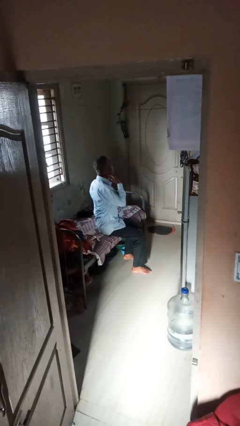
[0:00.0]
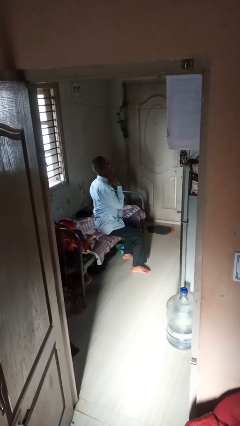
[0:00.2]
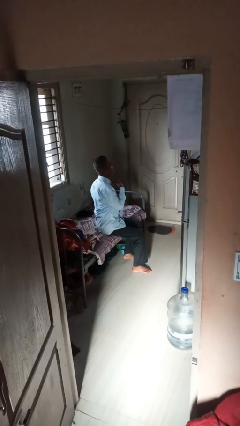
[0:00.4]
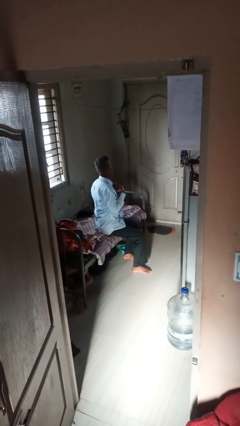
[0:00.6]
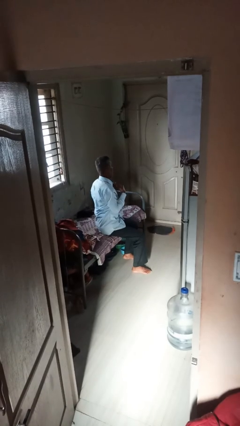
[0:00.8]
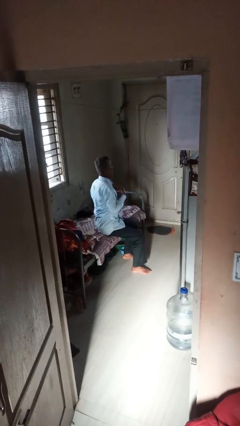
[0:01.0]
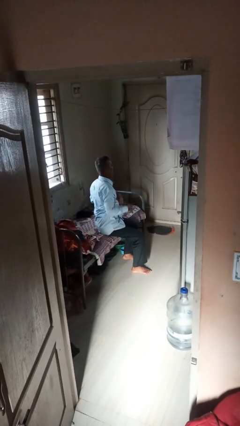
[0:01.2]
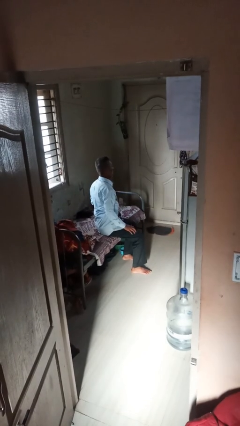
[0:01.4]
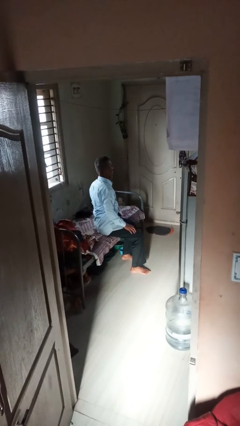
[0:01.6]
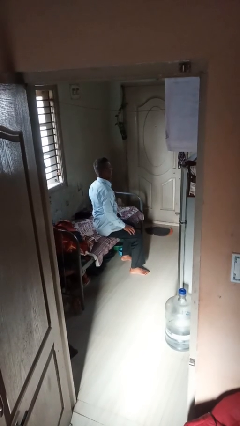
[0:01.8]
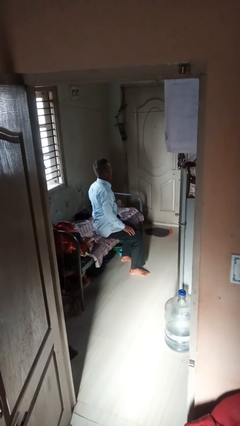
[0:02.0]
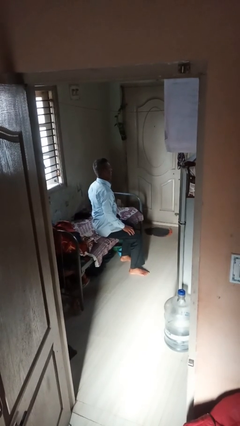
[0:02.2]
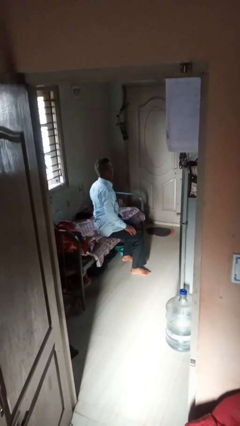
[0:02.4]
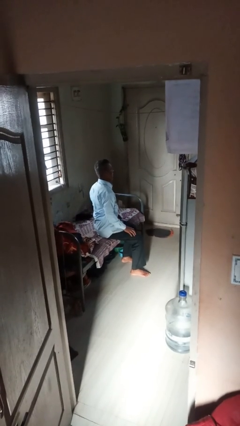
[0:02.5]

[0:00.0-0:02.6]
person puts on necklace

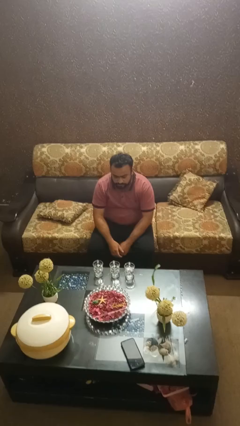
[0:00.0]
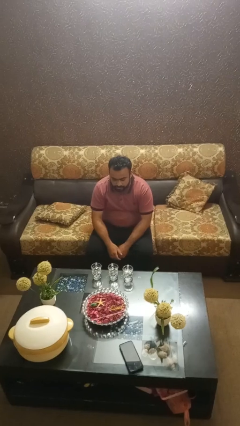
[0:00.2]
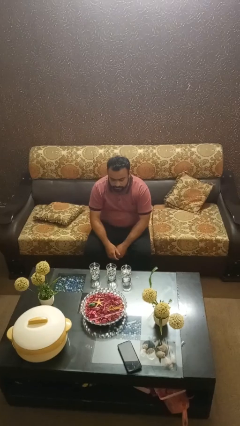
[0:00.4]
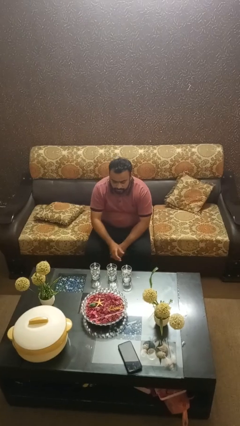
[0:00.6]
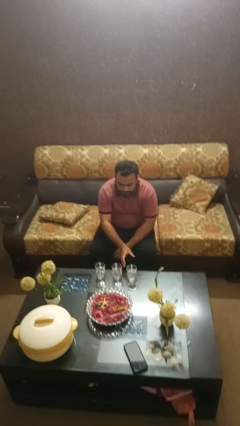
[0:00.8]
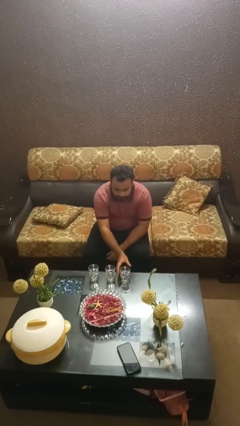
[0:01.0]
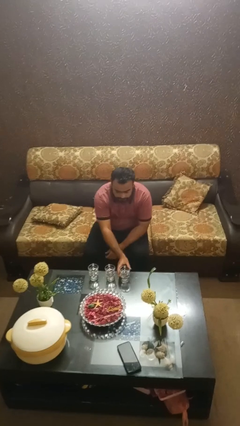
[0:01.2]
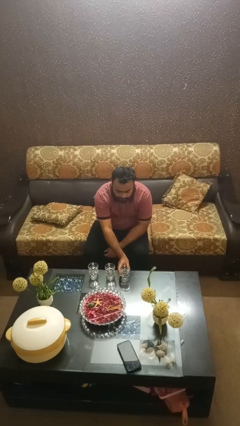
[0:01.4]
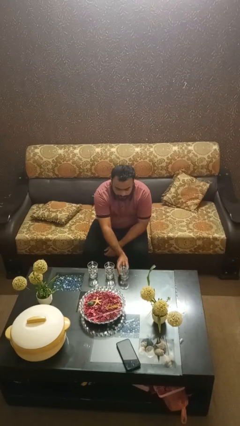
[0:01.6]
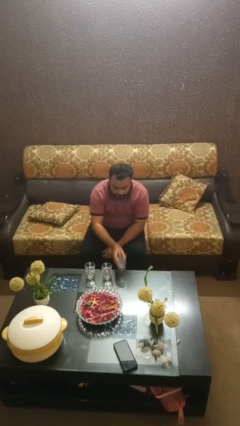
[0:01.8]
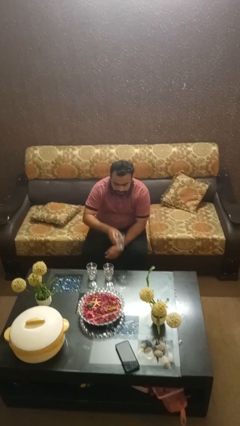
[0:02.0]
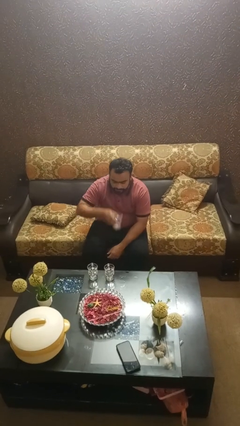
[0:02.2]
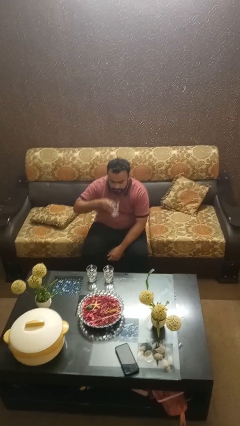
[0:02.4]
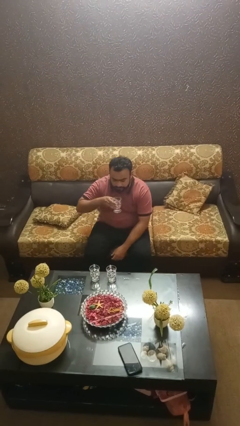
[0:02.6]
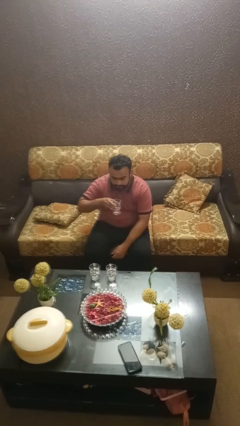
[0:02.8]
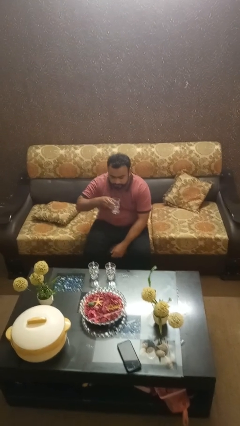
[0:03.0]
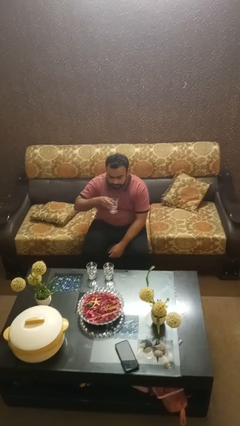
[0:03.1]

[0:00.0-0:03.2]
person picks up object from table

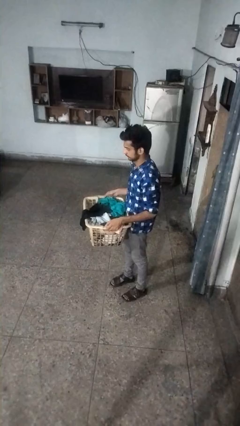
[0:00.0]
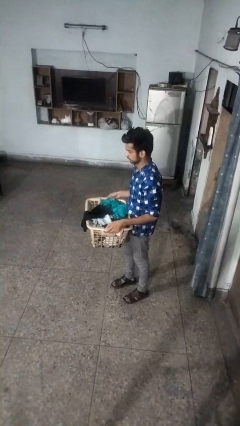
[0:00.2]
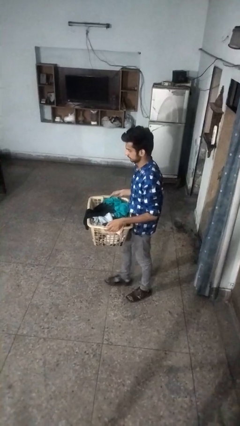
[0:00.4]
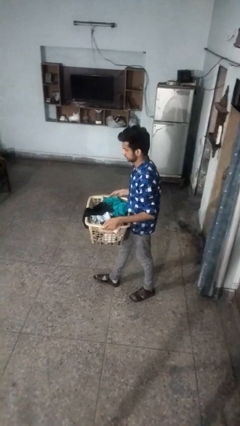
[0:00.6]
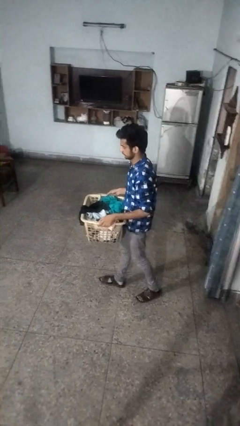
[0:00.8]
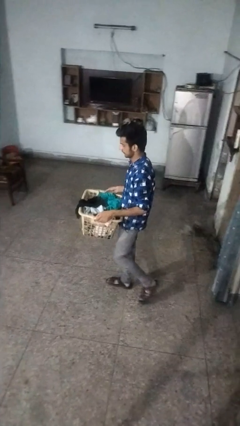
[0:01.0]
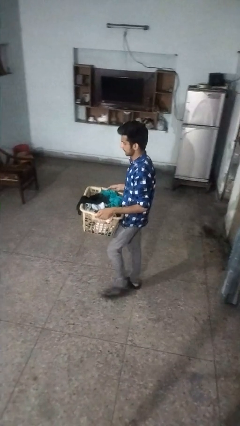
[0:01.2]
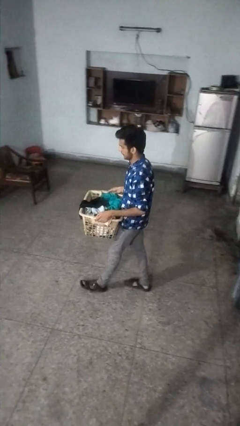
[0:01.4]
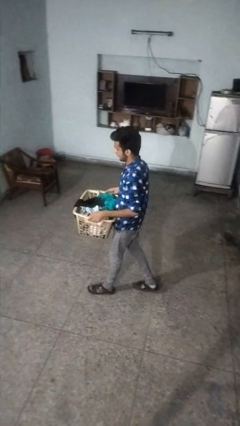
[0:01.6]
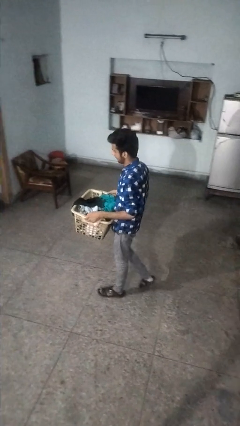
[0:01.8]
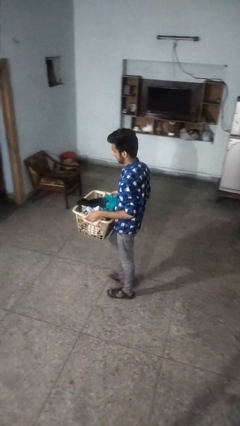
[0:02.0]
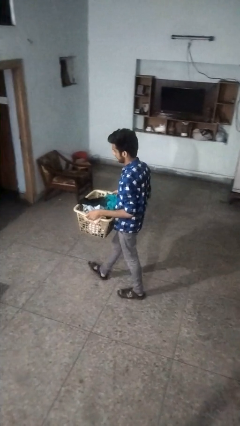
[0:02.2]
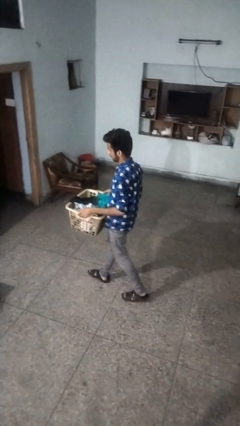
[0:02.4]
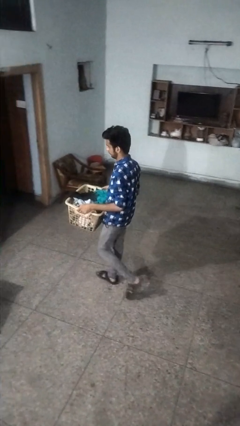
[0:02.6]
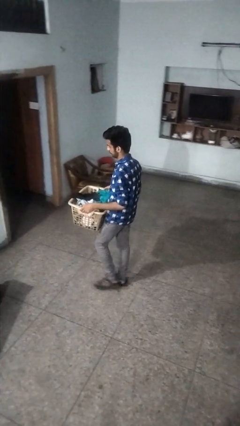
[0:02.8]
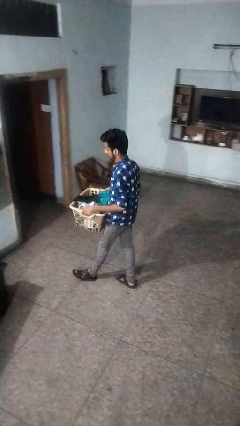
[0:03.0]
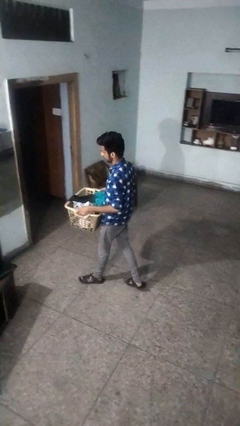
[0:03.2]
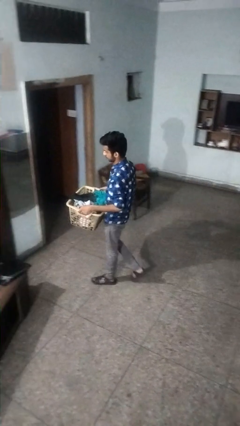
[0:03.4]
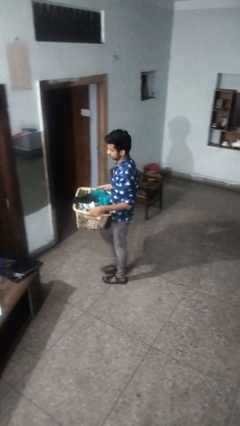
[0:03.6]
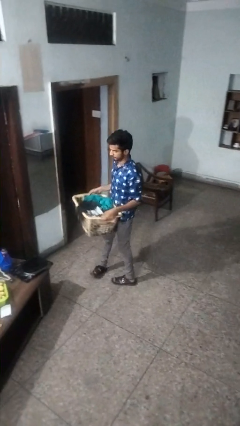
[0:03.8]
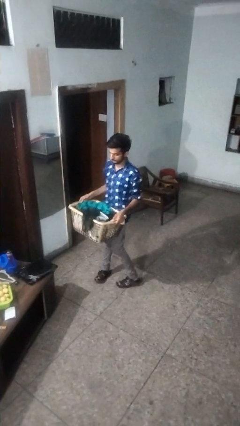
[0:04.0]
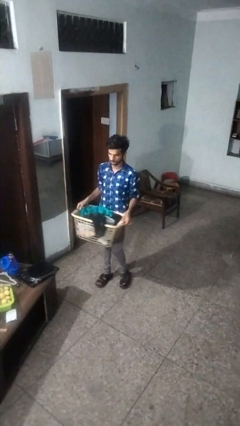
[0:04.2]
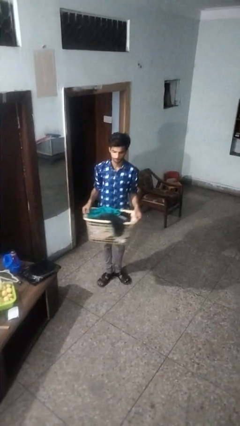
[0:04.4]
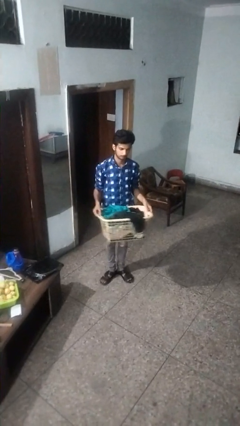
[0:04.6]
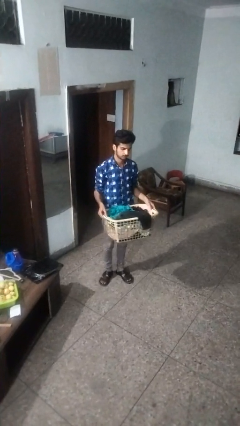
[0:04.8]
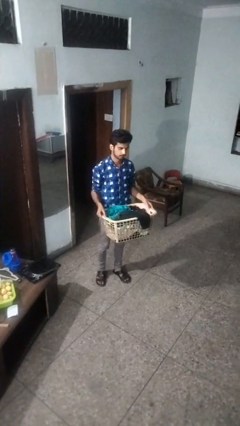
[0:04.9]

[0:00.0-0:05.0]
person carries laundry basket

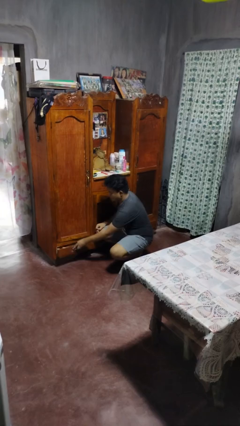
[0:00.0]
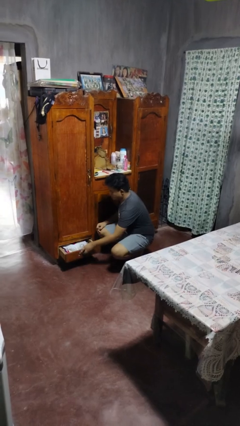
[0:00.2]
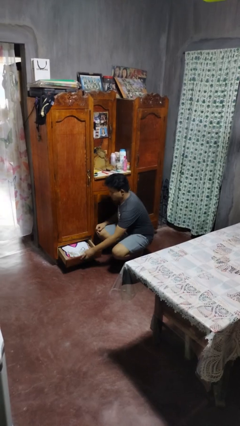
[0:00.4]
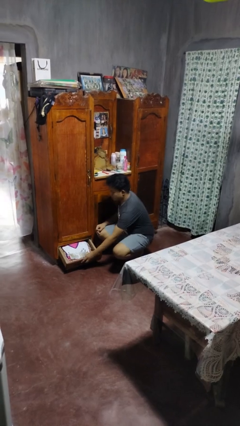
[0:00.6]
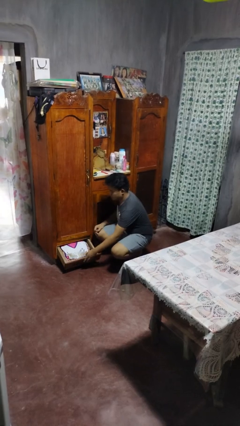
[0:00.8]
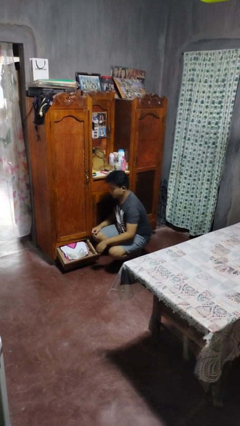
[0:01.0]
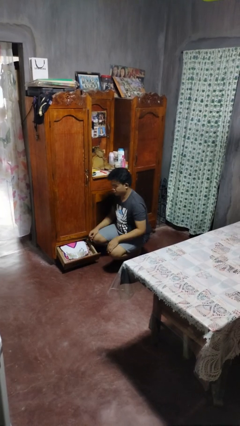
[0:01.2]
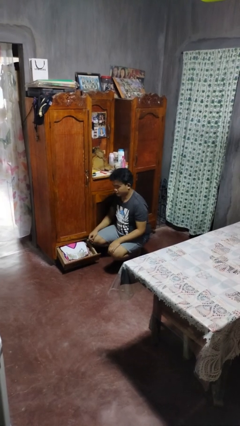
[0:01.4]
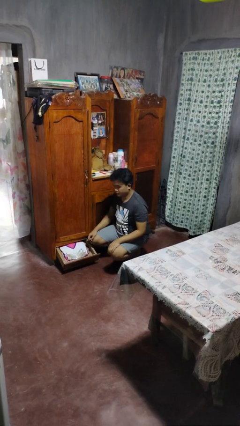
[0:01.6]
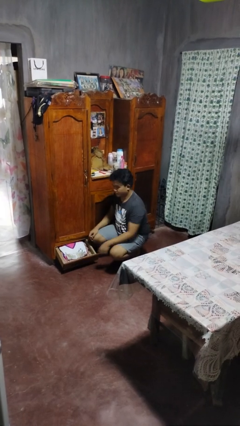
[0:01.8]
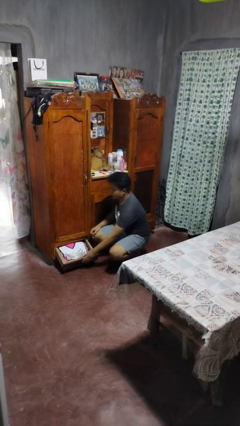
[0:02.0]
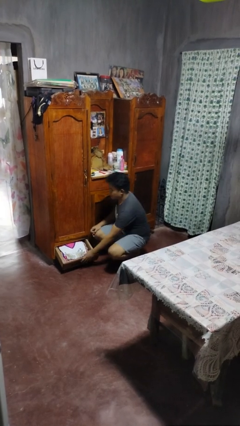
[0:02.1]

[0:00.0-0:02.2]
person opens dresser drawer

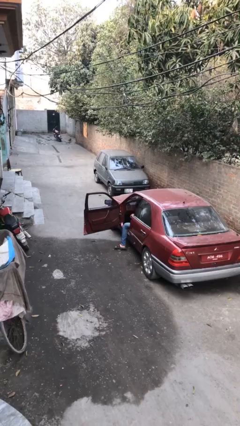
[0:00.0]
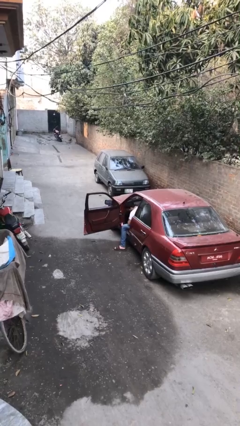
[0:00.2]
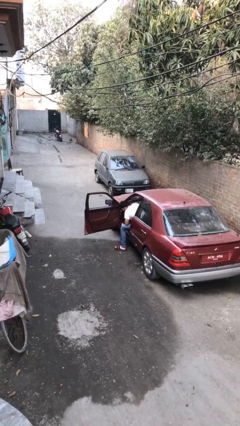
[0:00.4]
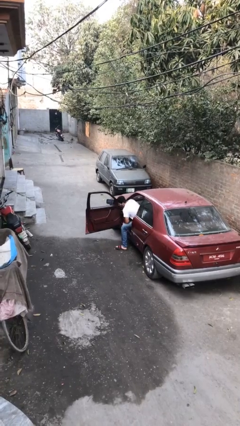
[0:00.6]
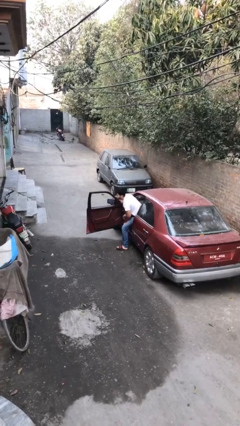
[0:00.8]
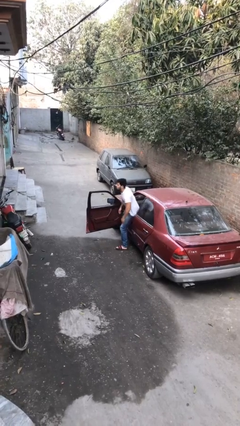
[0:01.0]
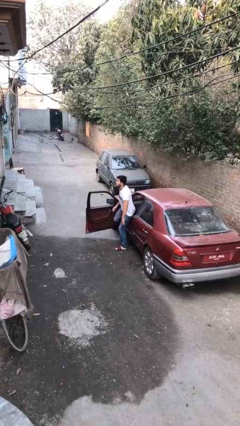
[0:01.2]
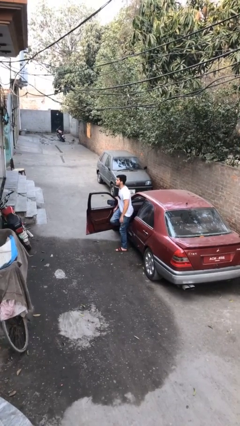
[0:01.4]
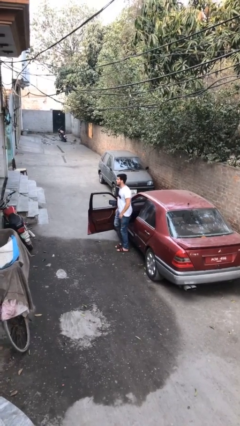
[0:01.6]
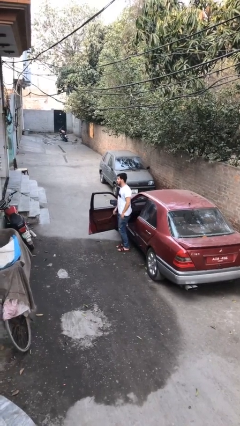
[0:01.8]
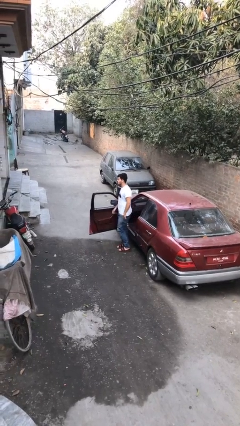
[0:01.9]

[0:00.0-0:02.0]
person exits car

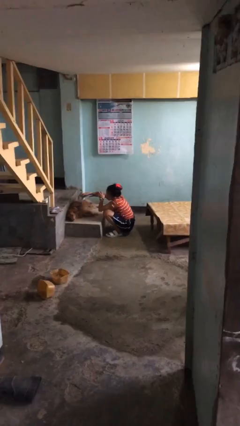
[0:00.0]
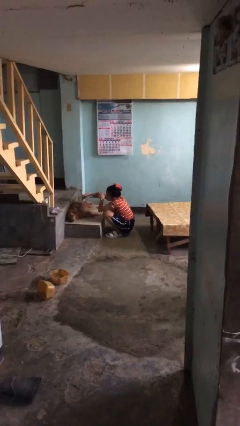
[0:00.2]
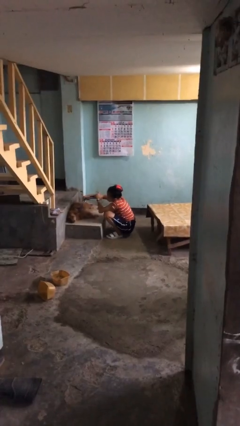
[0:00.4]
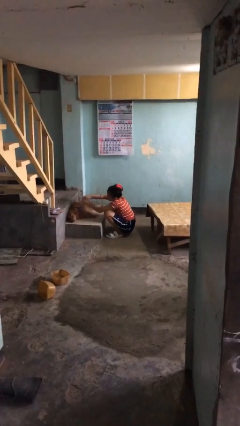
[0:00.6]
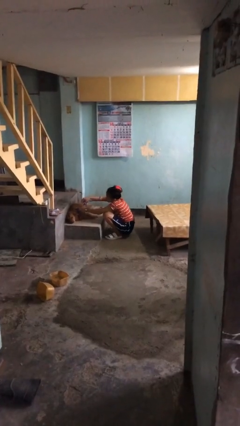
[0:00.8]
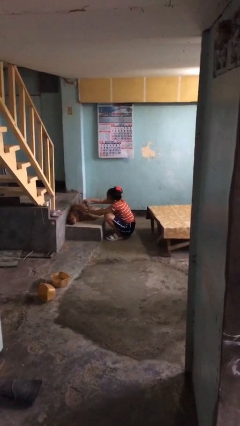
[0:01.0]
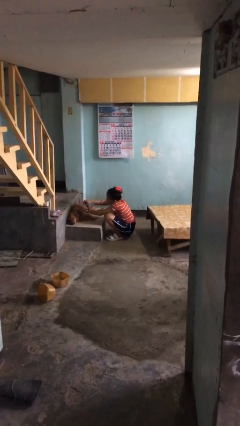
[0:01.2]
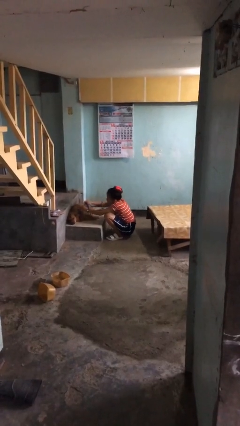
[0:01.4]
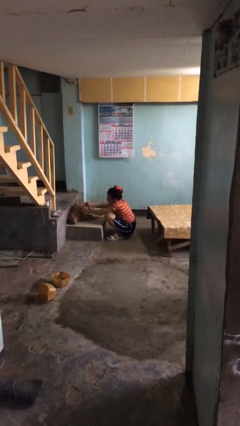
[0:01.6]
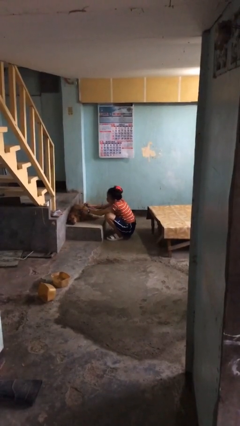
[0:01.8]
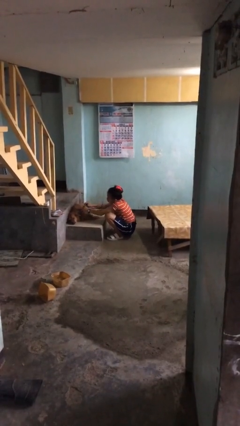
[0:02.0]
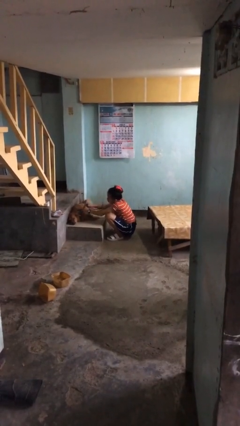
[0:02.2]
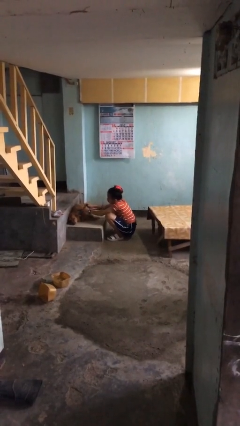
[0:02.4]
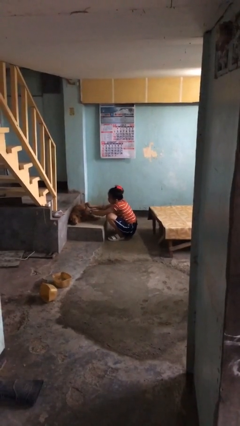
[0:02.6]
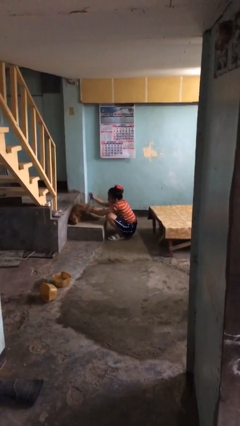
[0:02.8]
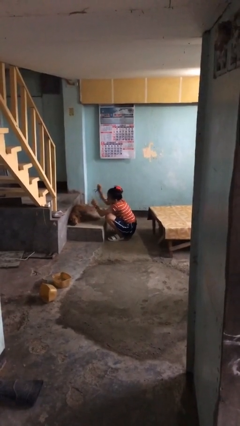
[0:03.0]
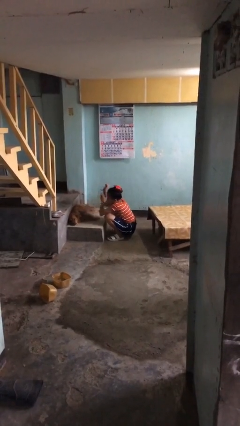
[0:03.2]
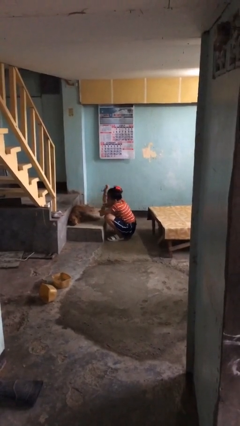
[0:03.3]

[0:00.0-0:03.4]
person unattaches leash from dog
